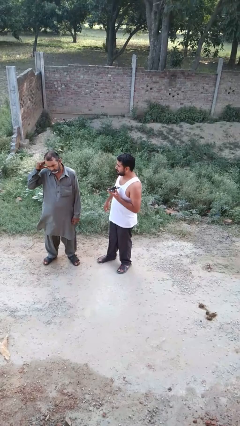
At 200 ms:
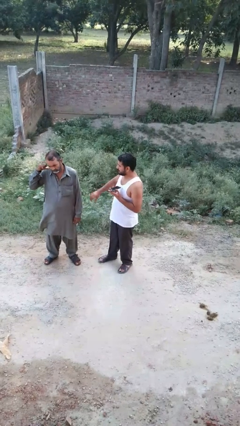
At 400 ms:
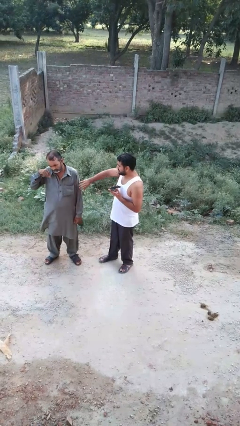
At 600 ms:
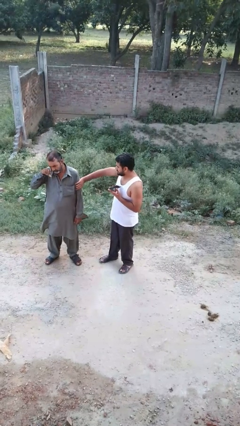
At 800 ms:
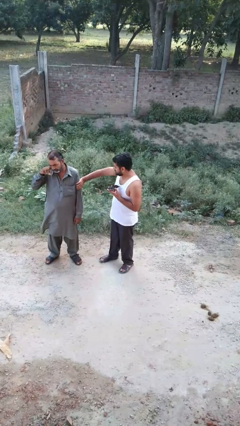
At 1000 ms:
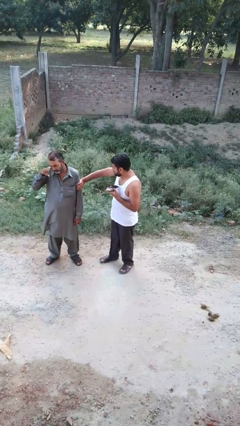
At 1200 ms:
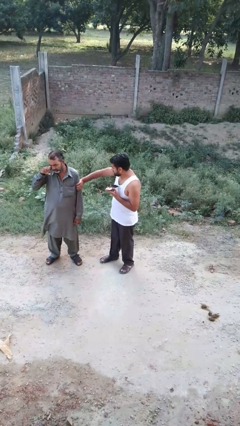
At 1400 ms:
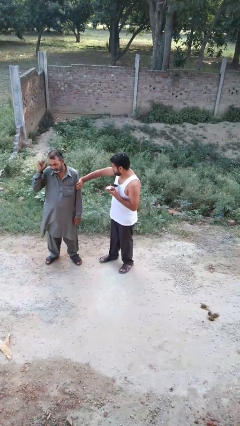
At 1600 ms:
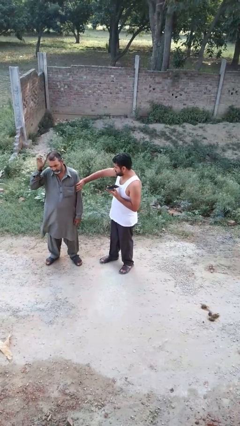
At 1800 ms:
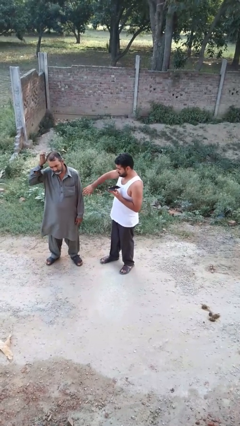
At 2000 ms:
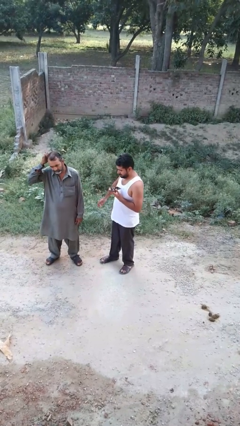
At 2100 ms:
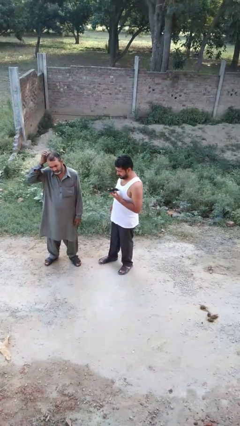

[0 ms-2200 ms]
person grabs person by bicep

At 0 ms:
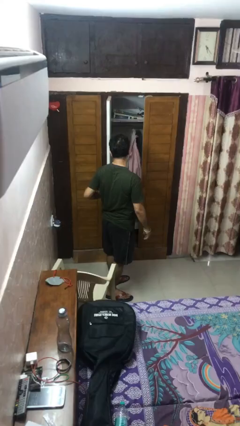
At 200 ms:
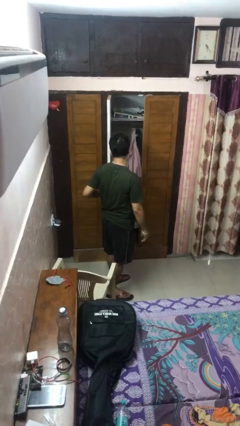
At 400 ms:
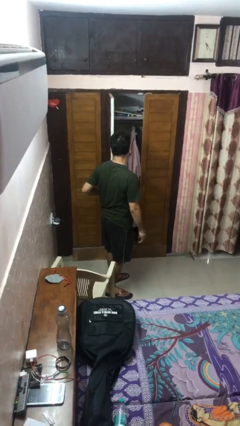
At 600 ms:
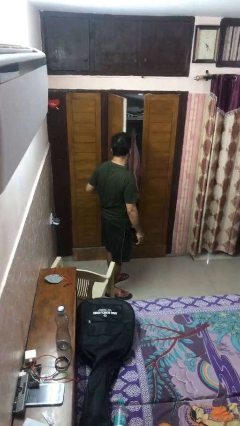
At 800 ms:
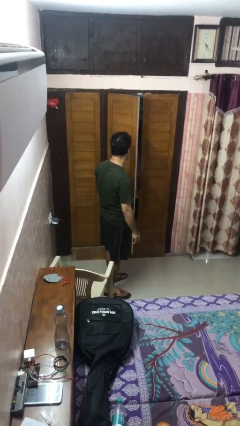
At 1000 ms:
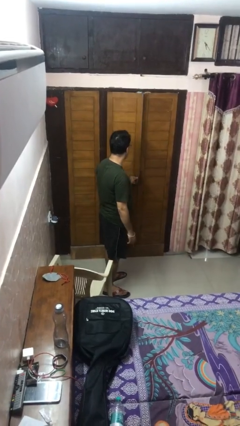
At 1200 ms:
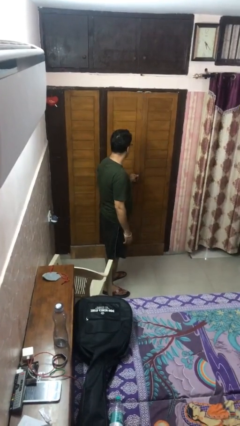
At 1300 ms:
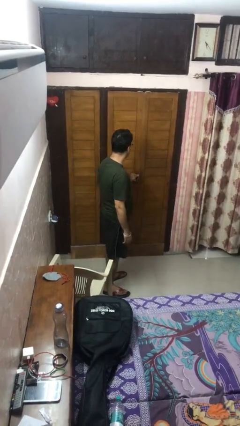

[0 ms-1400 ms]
person closes closet door

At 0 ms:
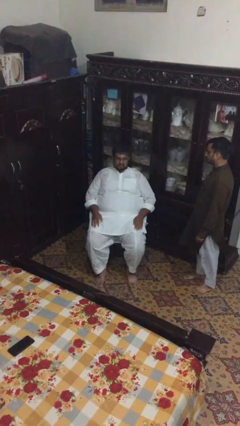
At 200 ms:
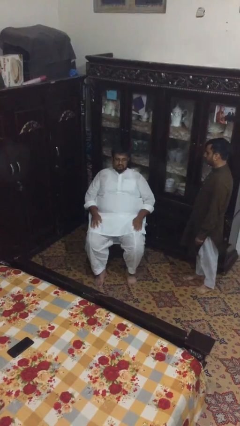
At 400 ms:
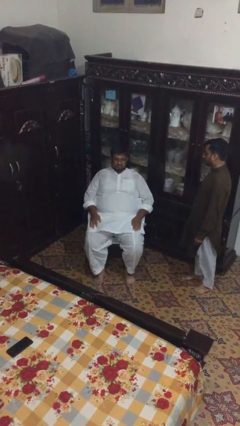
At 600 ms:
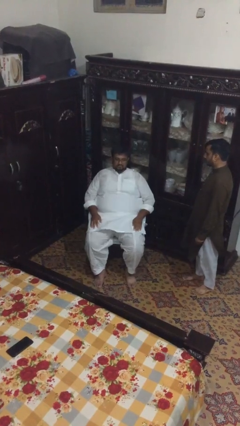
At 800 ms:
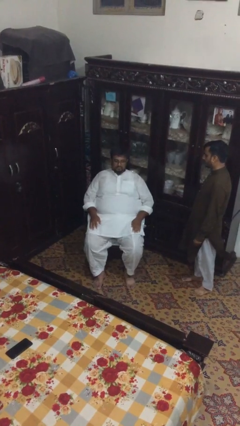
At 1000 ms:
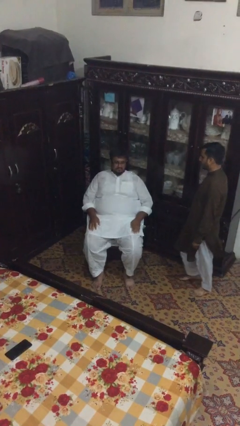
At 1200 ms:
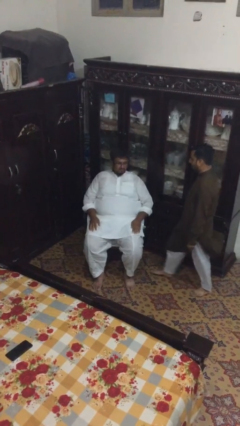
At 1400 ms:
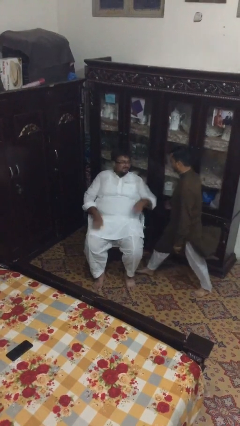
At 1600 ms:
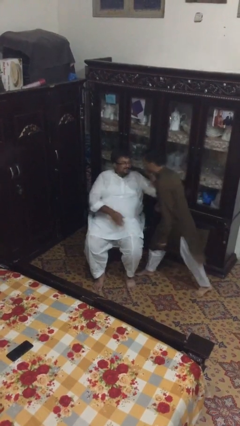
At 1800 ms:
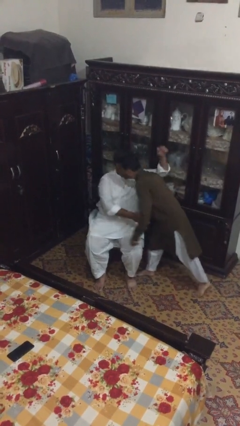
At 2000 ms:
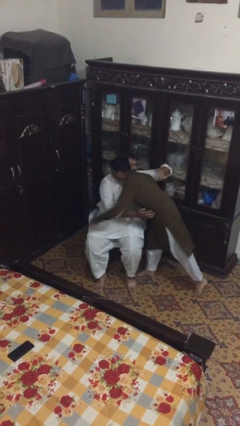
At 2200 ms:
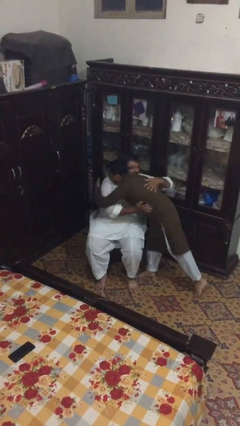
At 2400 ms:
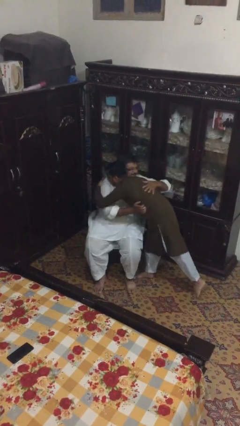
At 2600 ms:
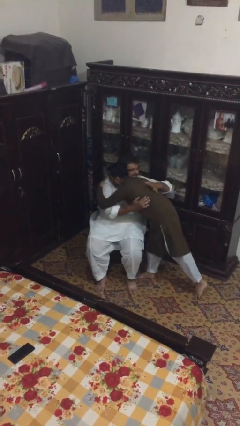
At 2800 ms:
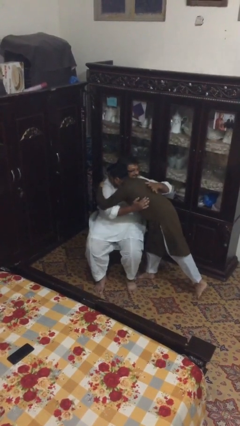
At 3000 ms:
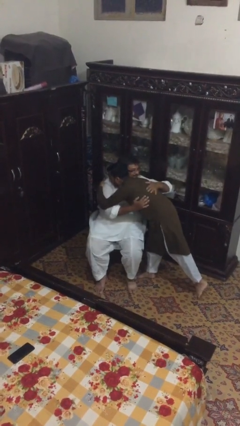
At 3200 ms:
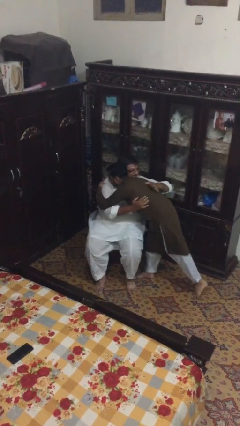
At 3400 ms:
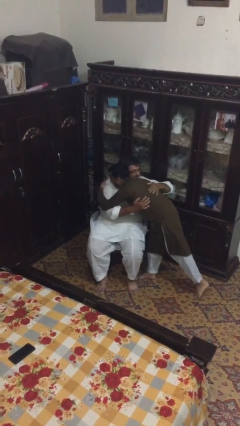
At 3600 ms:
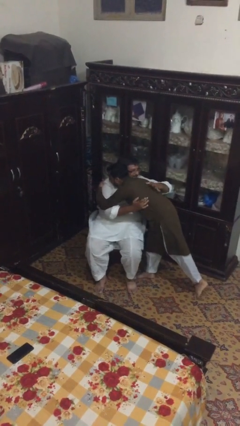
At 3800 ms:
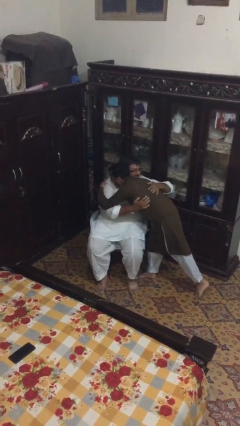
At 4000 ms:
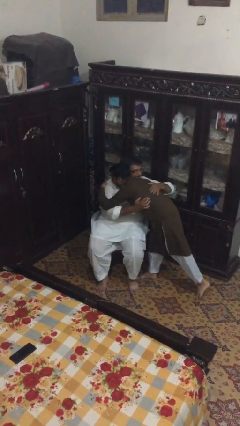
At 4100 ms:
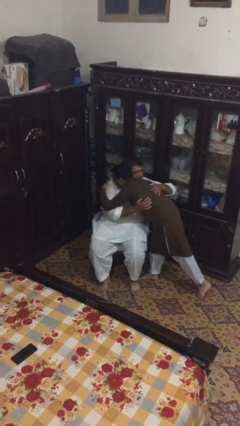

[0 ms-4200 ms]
person embraces person

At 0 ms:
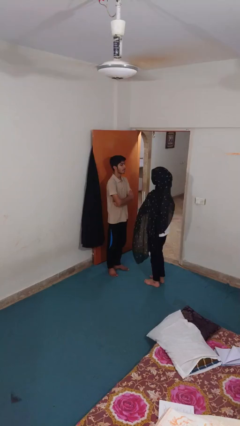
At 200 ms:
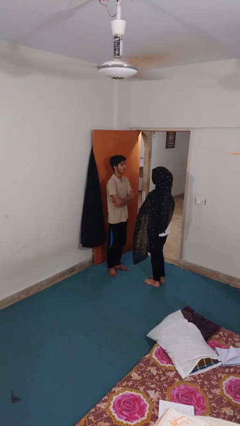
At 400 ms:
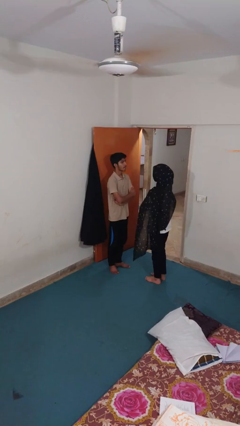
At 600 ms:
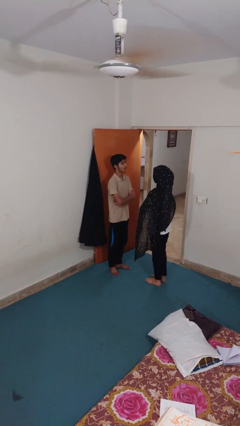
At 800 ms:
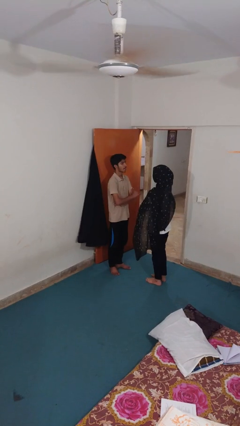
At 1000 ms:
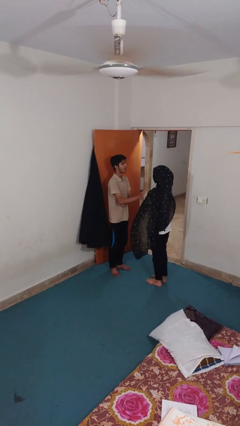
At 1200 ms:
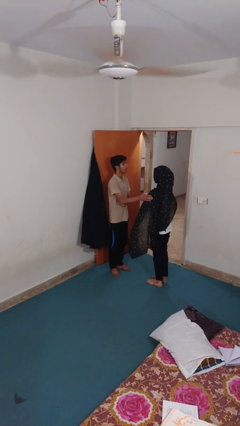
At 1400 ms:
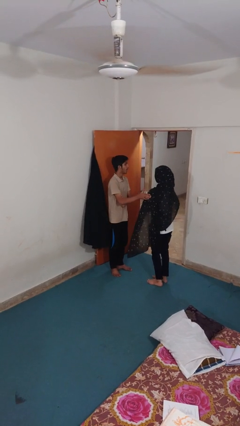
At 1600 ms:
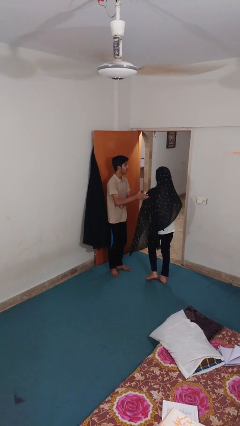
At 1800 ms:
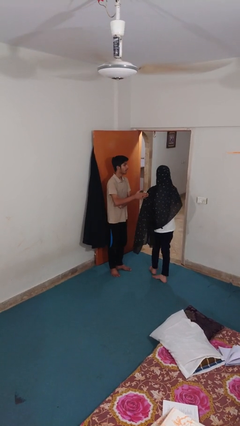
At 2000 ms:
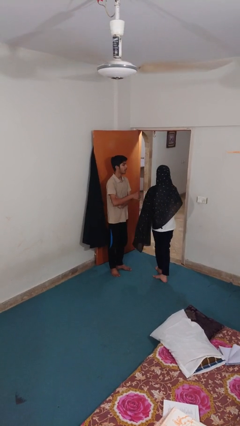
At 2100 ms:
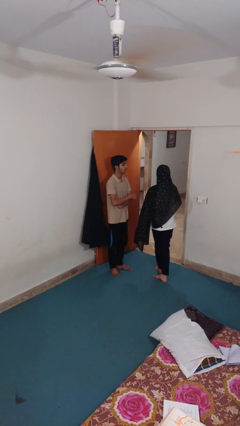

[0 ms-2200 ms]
person shoves person

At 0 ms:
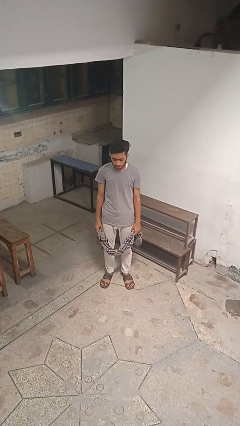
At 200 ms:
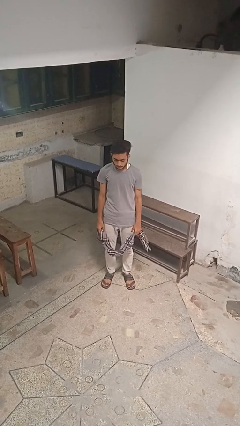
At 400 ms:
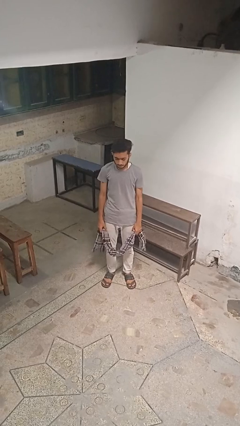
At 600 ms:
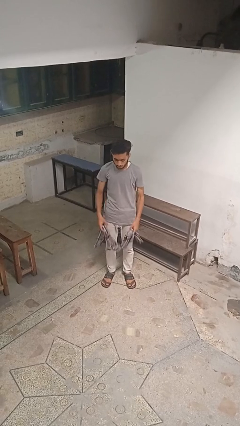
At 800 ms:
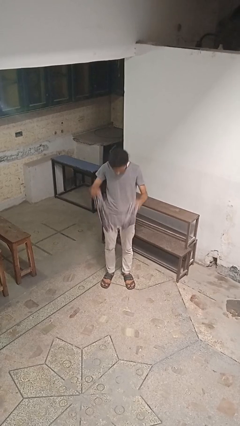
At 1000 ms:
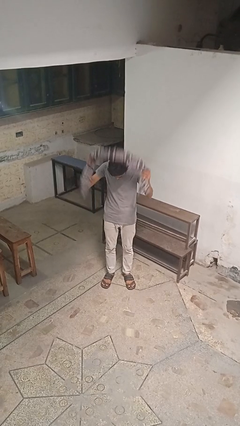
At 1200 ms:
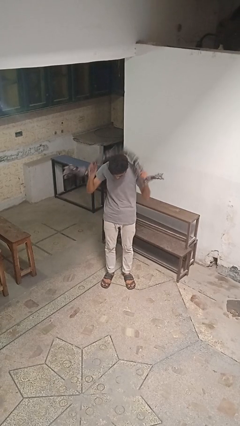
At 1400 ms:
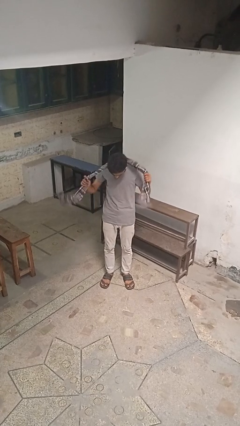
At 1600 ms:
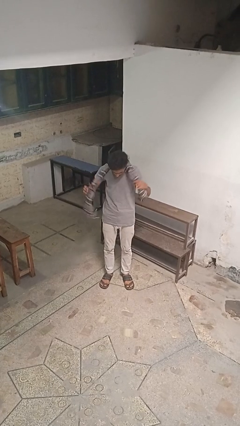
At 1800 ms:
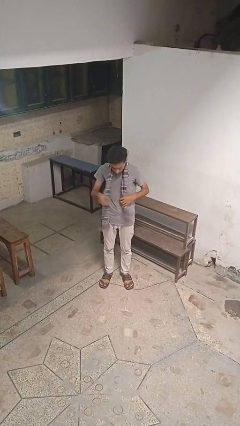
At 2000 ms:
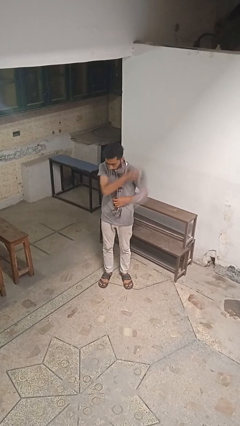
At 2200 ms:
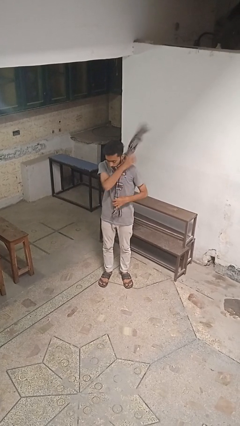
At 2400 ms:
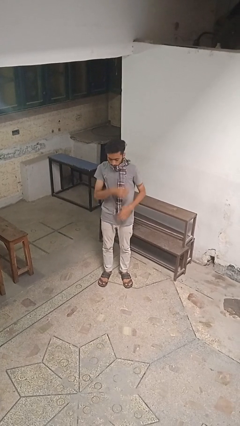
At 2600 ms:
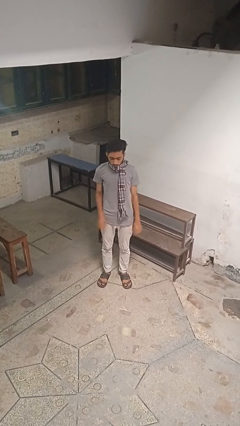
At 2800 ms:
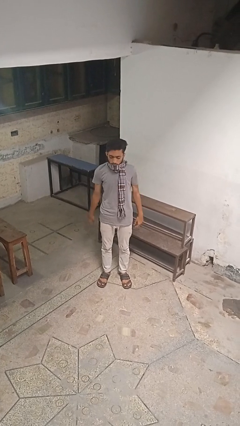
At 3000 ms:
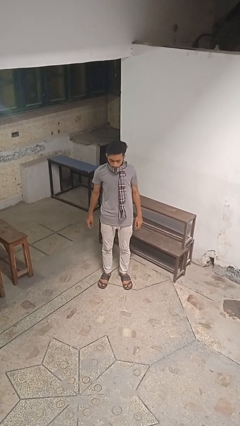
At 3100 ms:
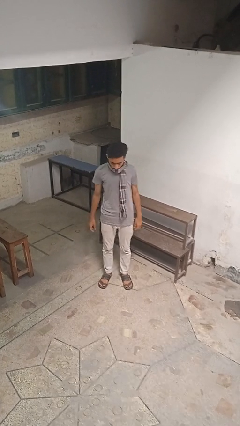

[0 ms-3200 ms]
person puts on scarf

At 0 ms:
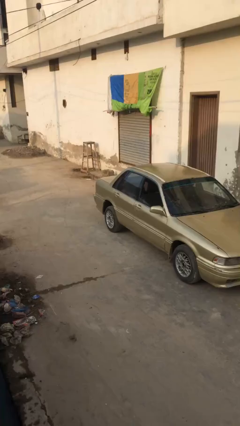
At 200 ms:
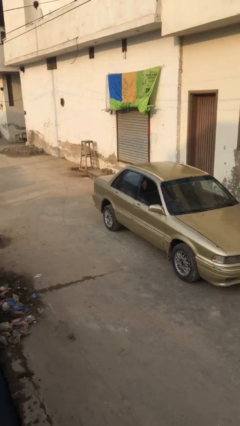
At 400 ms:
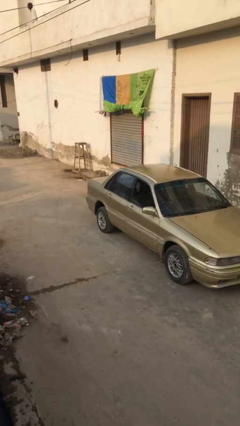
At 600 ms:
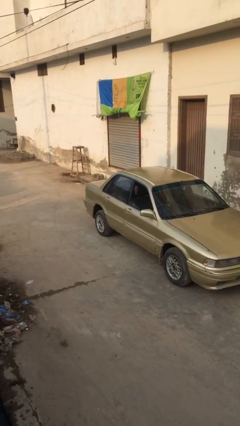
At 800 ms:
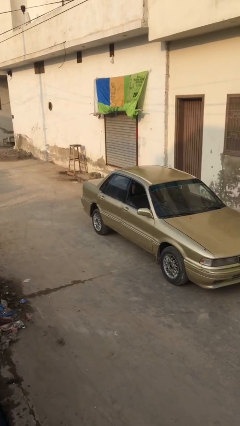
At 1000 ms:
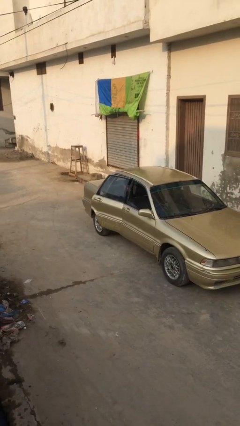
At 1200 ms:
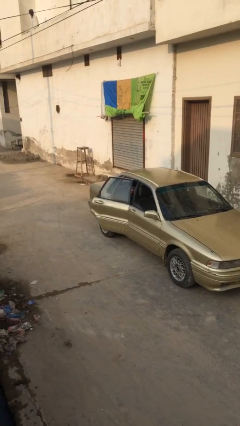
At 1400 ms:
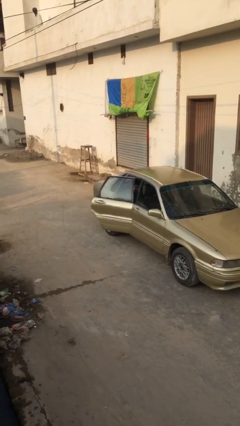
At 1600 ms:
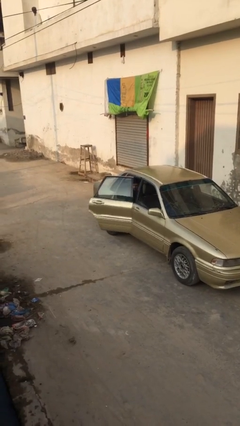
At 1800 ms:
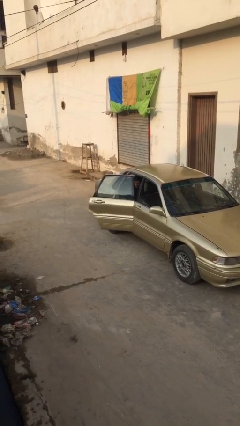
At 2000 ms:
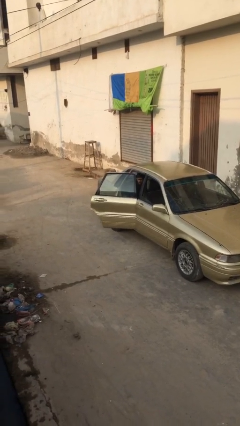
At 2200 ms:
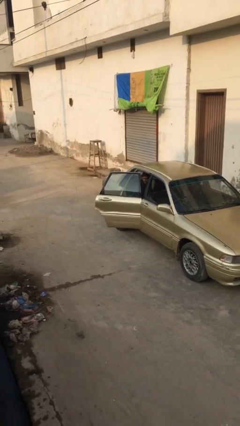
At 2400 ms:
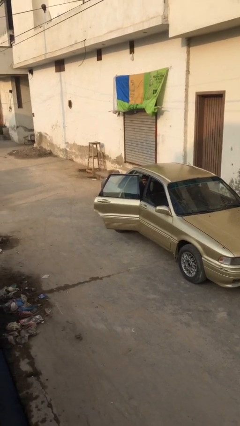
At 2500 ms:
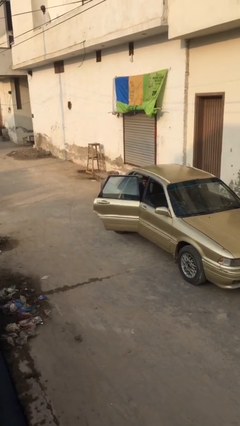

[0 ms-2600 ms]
person opens car door

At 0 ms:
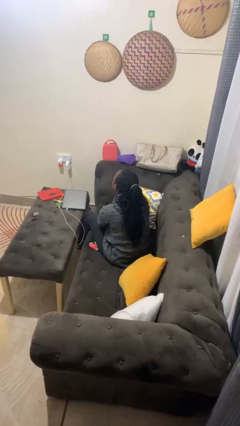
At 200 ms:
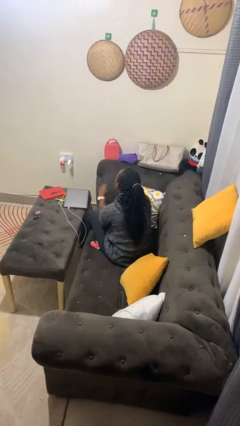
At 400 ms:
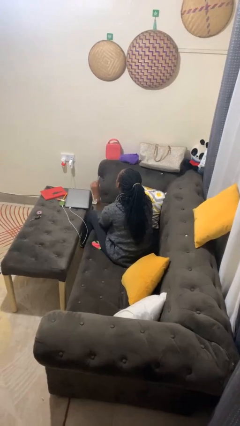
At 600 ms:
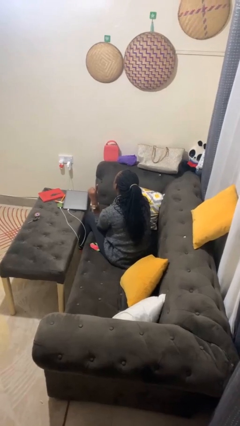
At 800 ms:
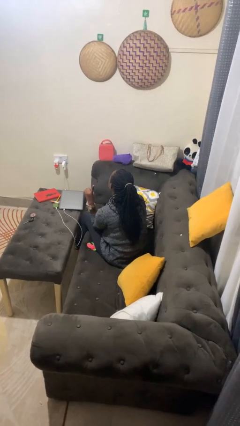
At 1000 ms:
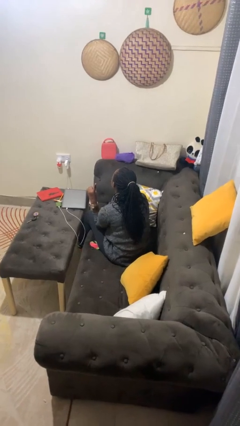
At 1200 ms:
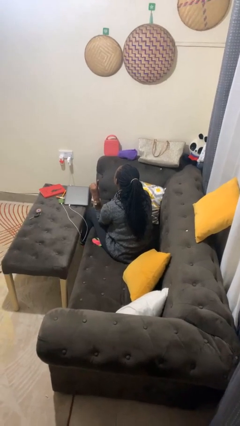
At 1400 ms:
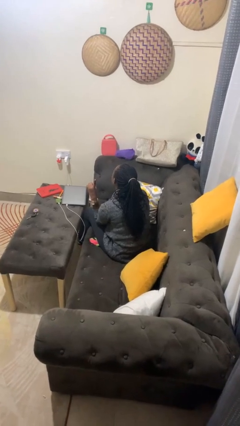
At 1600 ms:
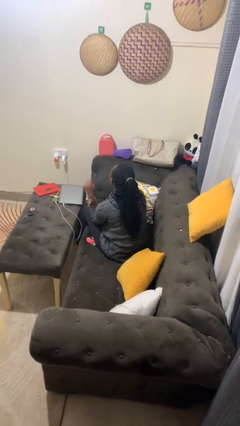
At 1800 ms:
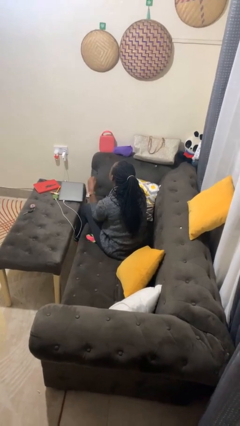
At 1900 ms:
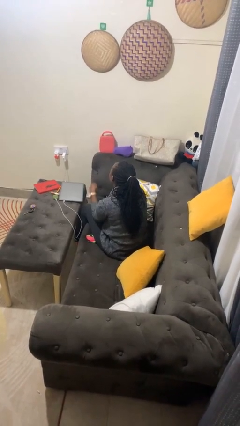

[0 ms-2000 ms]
person gestures number one
